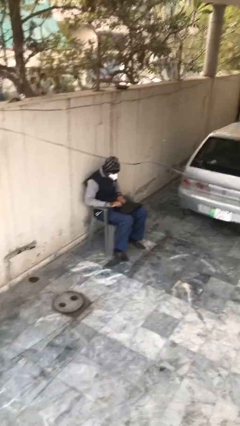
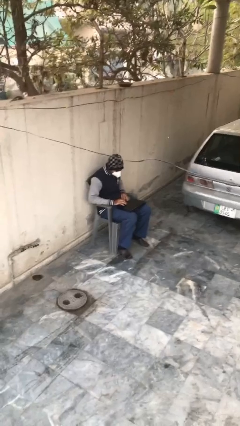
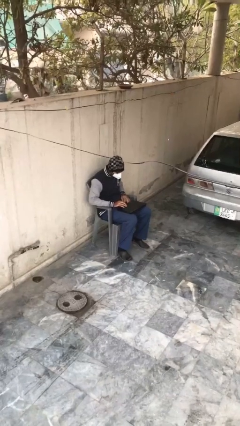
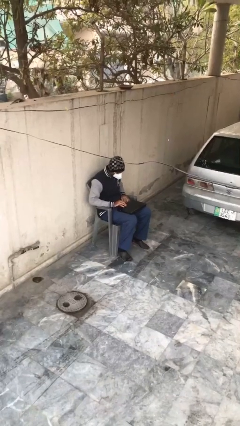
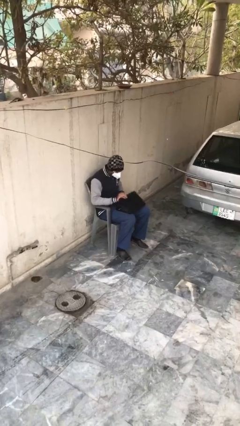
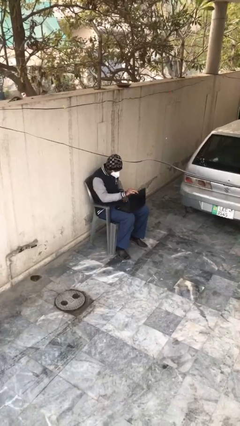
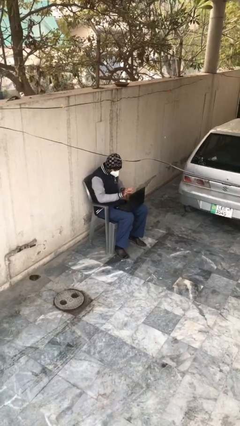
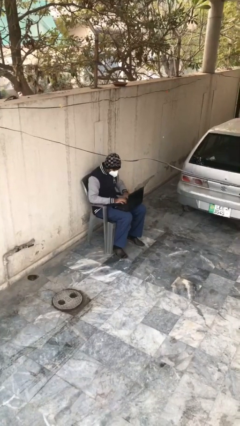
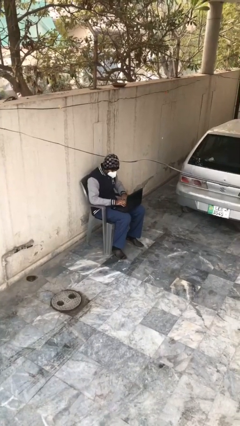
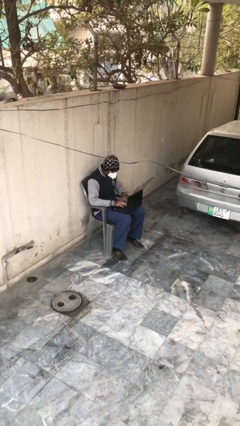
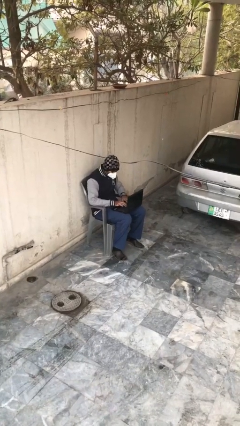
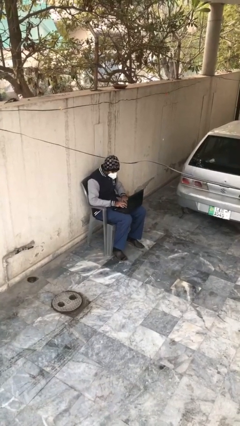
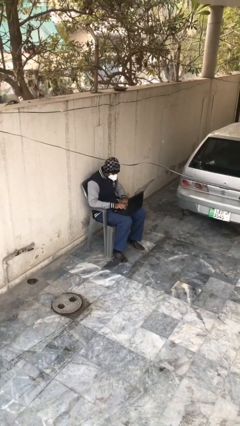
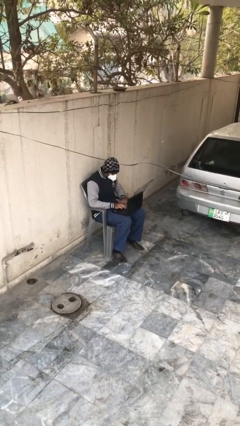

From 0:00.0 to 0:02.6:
person interacts with laptop

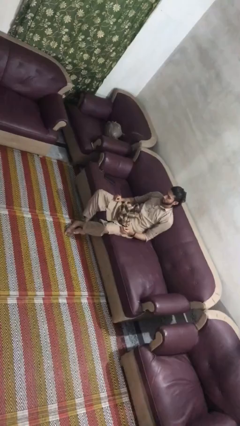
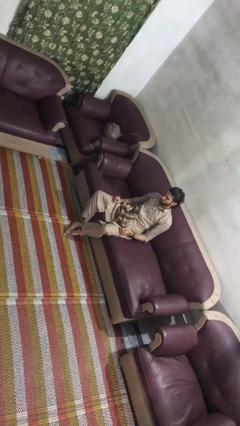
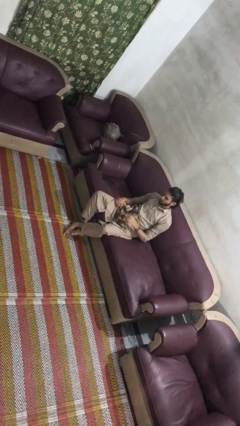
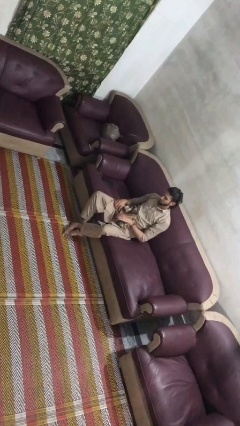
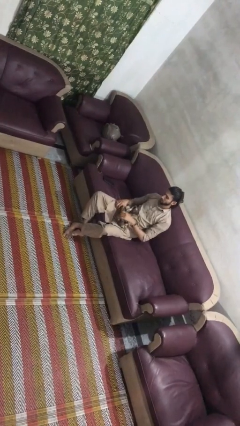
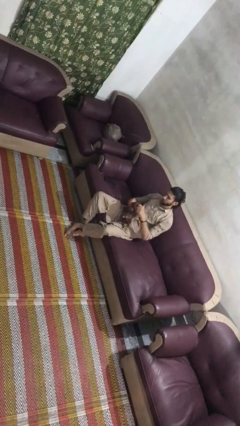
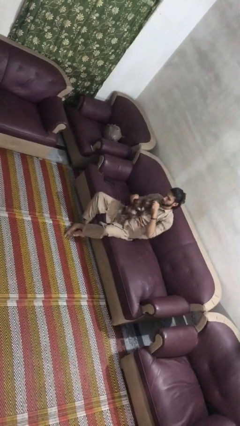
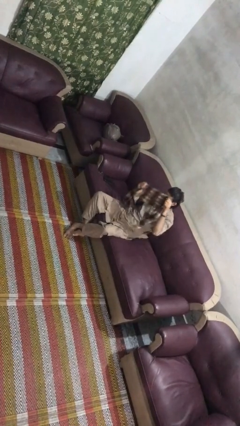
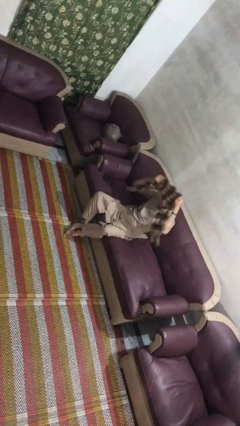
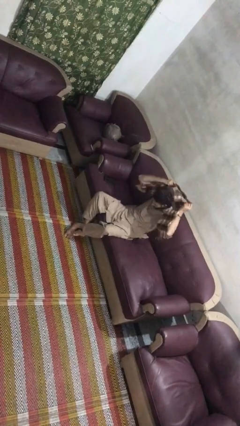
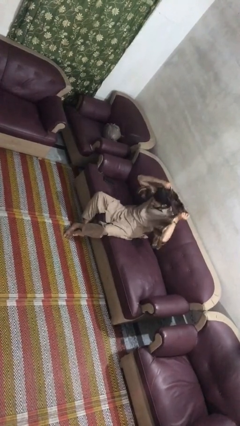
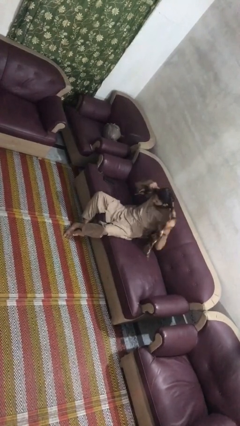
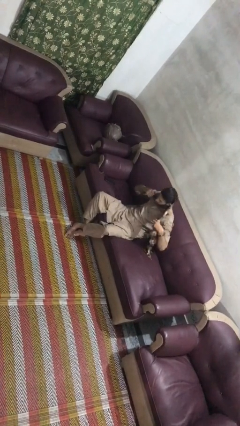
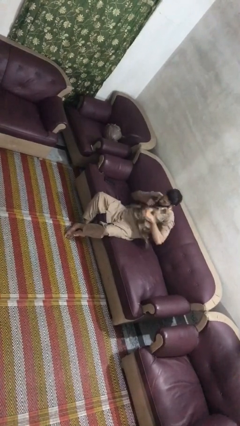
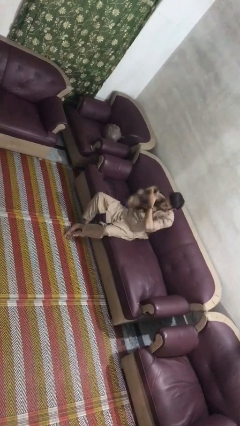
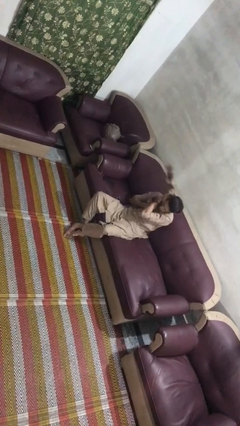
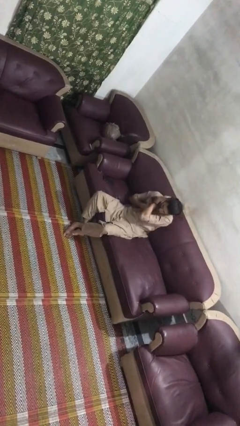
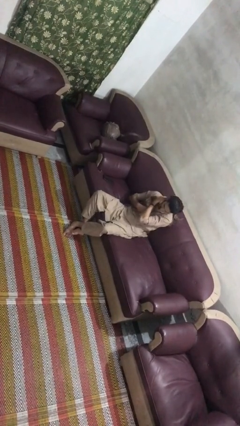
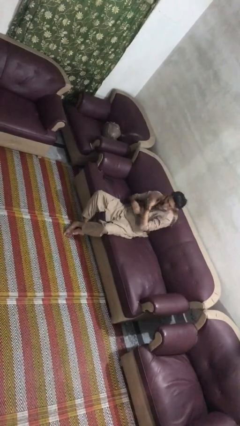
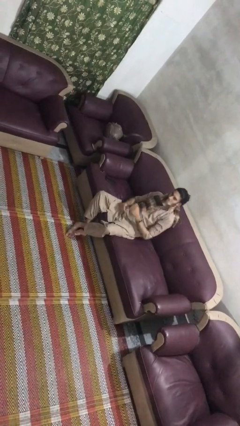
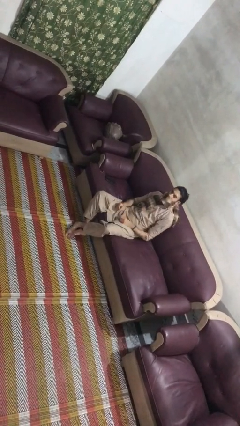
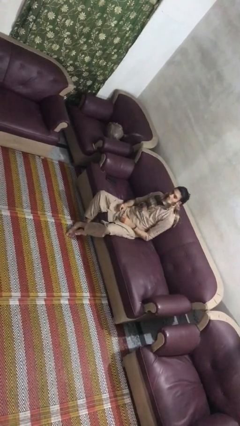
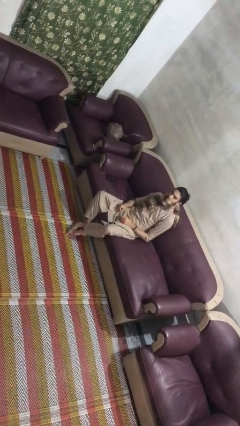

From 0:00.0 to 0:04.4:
person puts on scarf

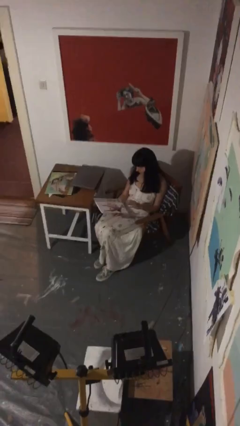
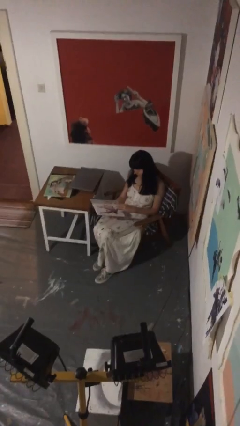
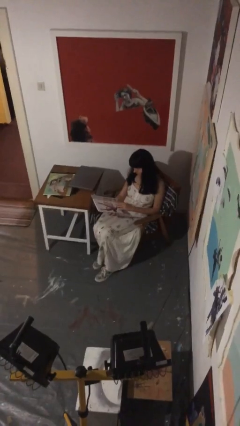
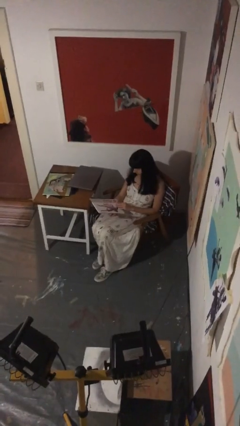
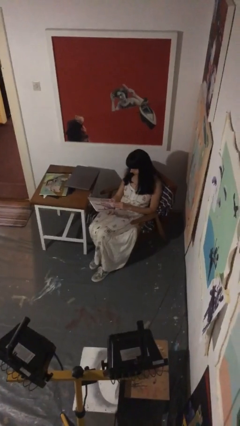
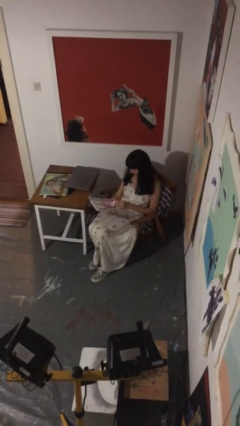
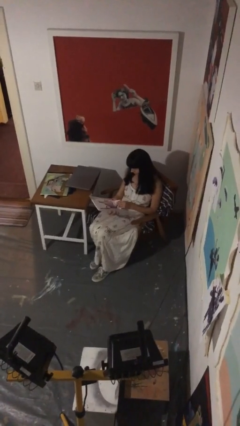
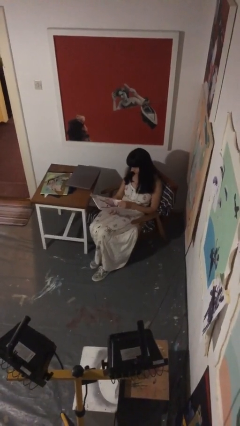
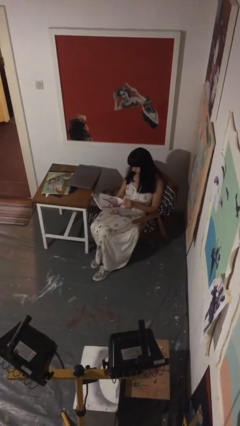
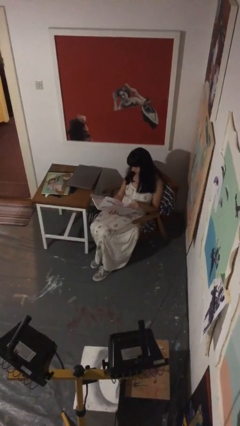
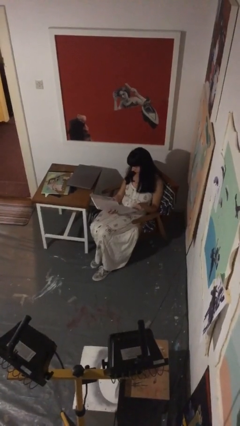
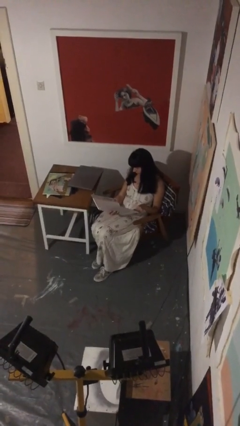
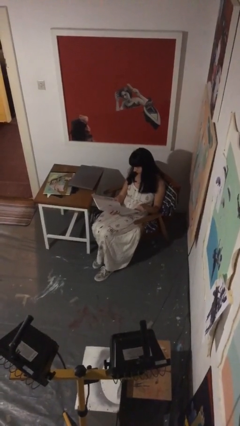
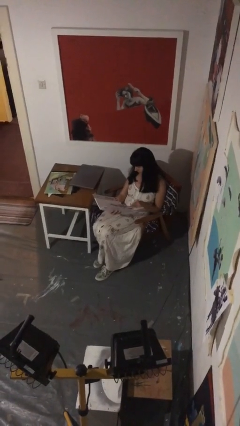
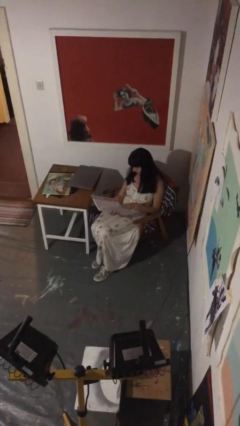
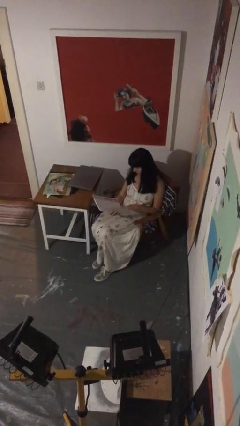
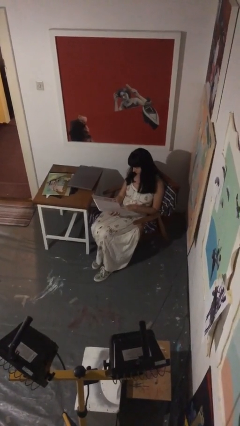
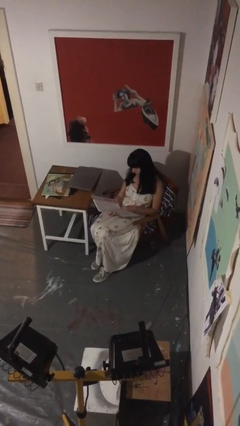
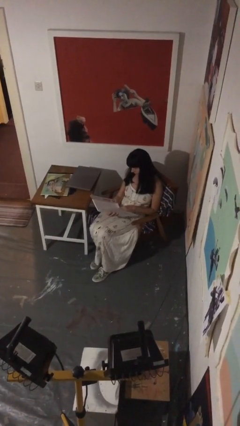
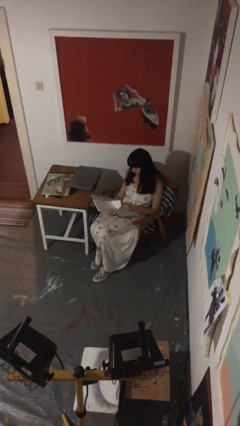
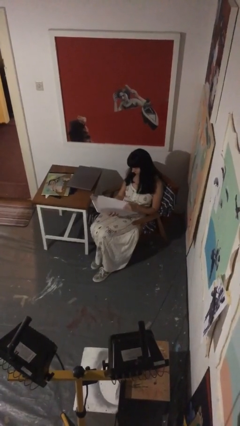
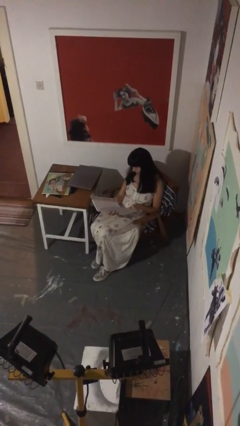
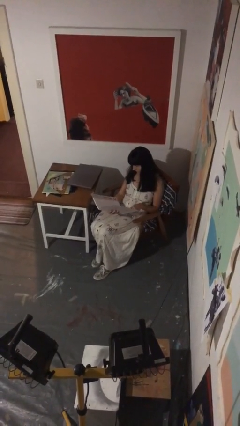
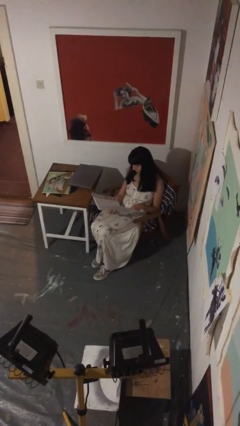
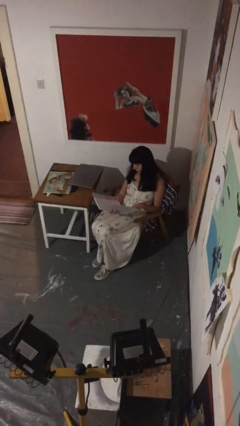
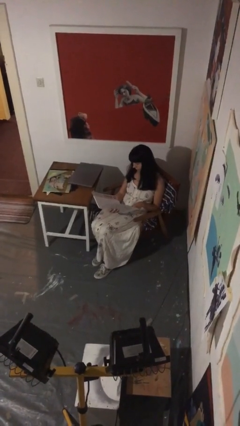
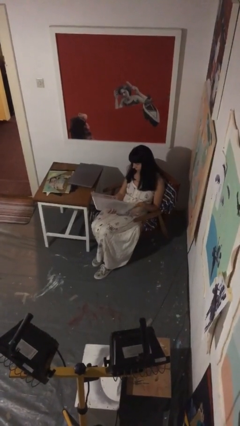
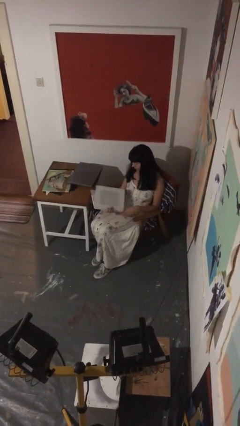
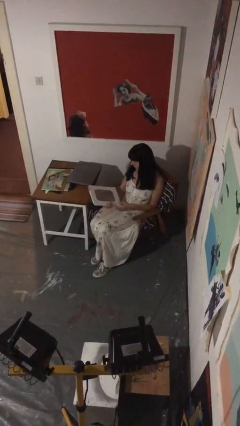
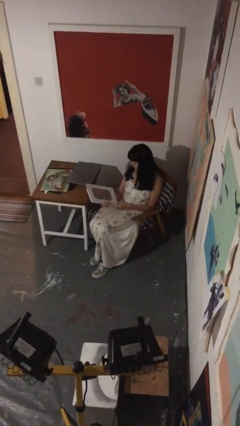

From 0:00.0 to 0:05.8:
person reads document

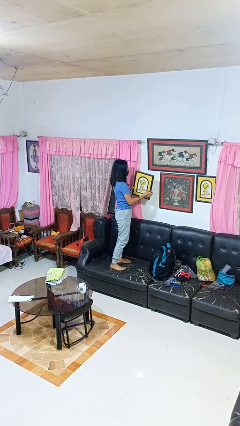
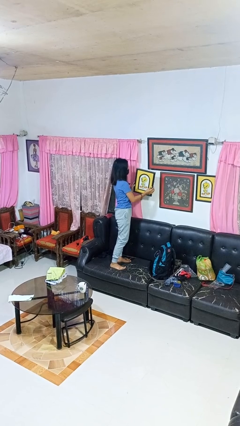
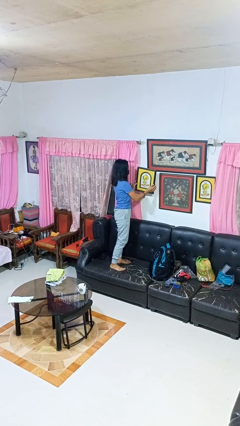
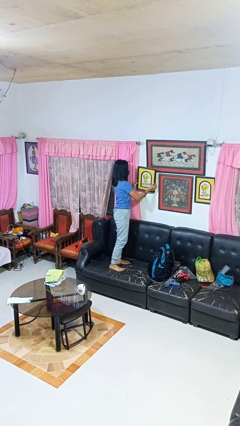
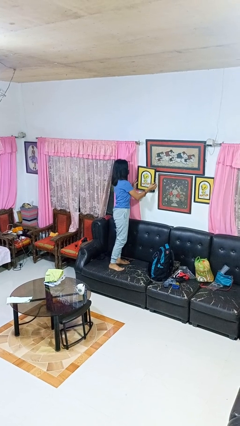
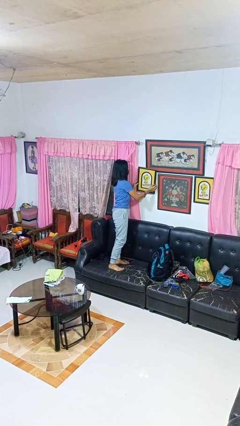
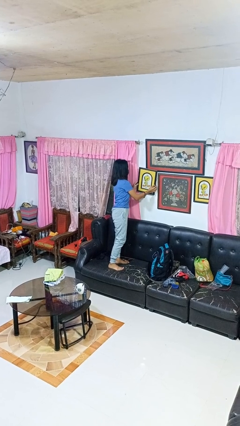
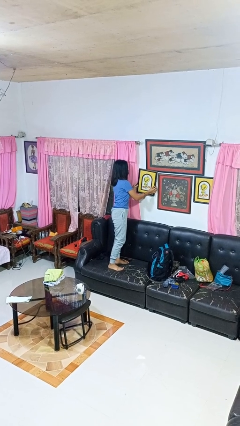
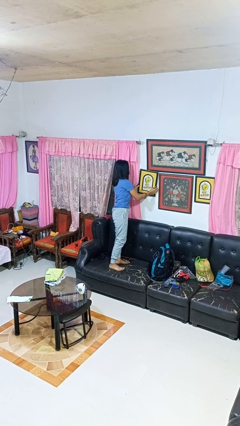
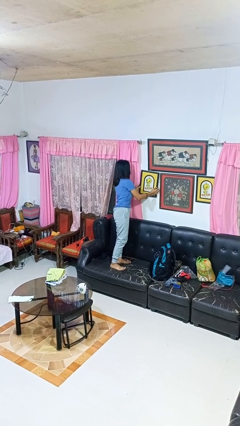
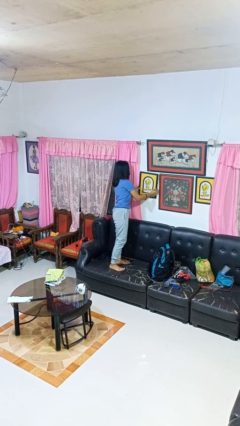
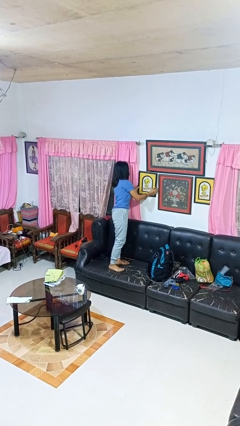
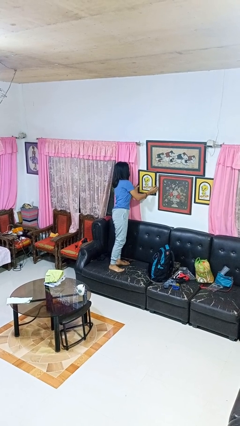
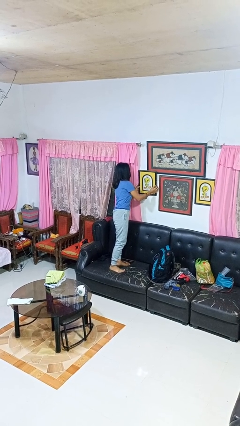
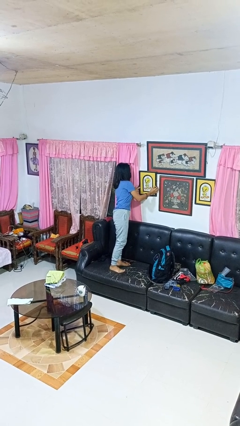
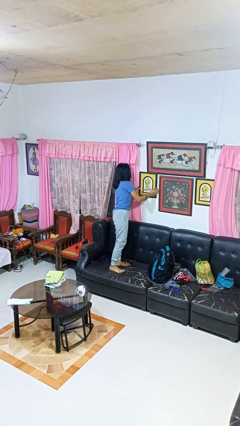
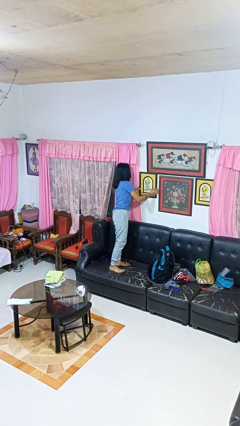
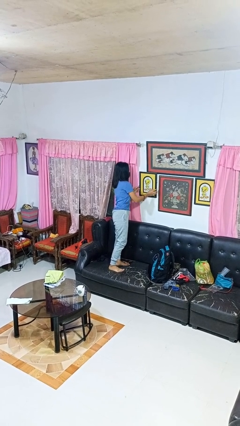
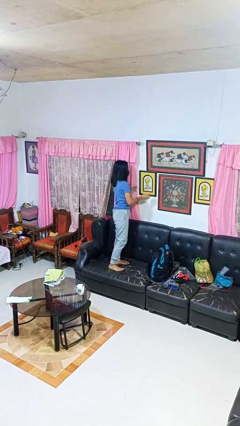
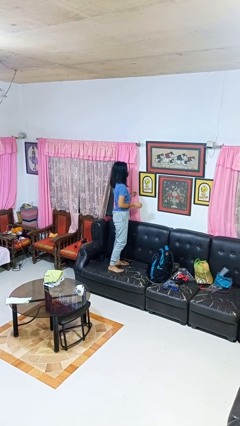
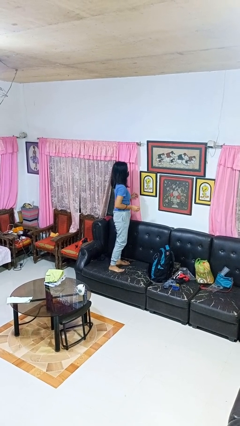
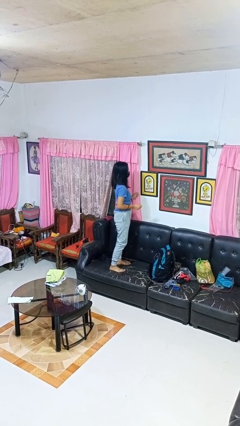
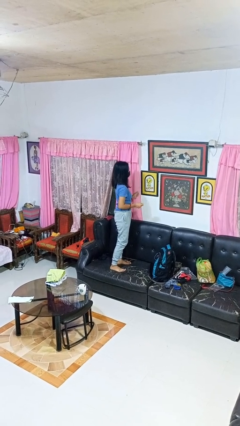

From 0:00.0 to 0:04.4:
person puts up picture frame

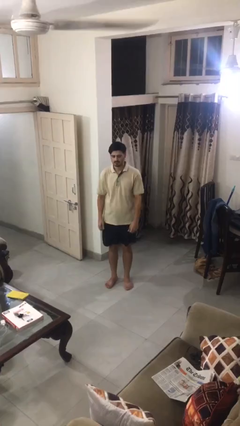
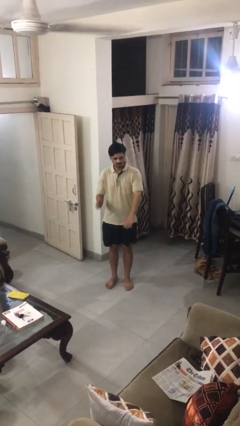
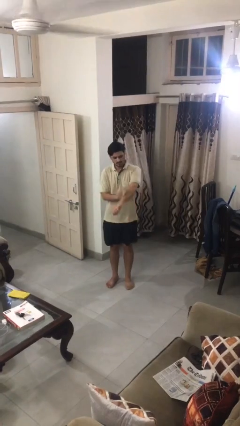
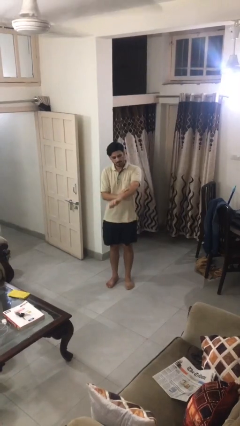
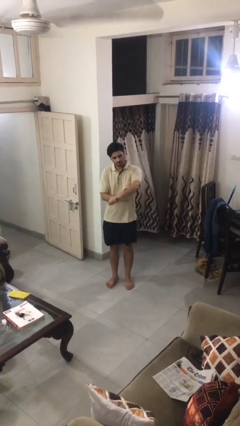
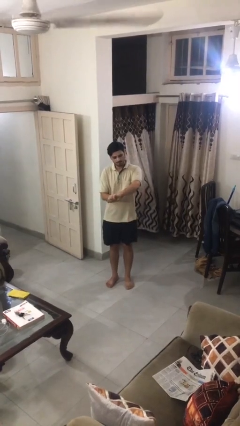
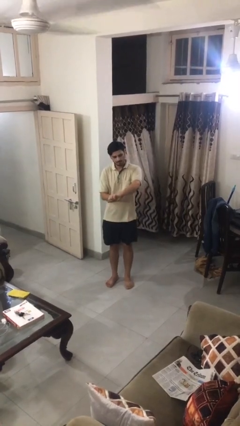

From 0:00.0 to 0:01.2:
person swats bug
